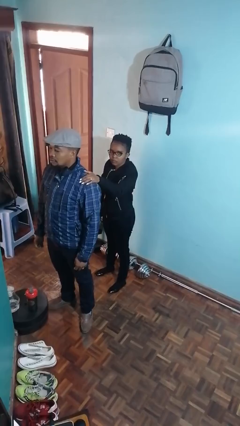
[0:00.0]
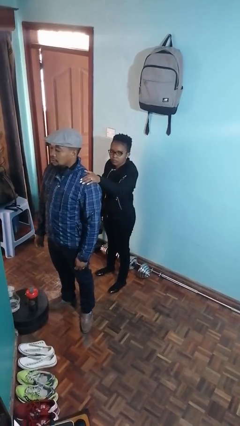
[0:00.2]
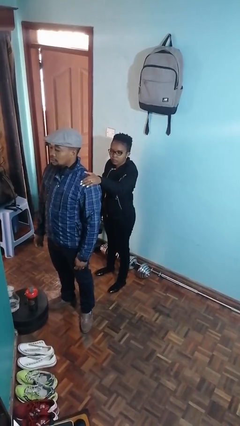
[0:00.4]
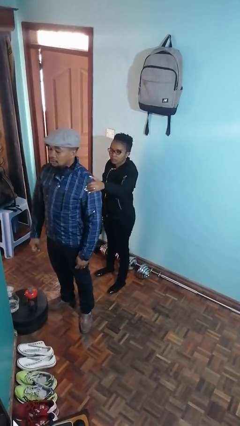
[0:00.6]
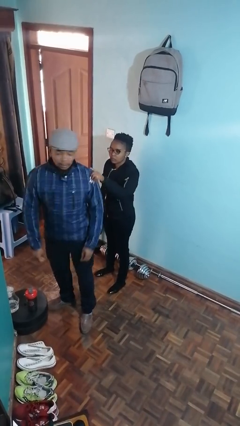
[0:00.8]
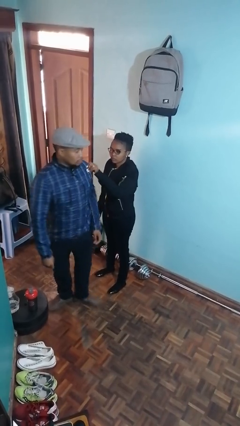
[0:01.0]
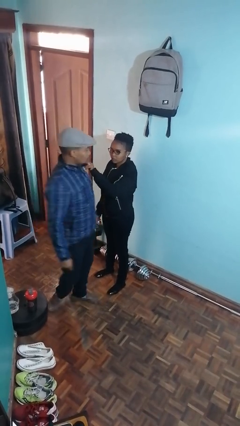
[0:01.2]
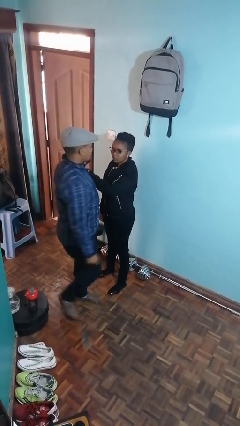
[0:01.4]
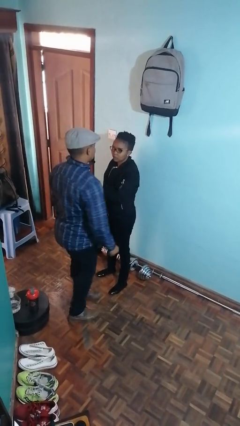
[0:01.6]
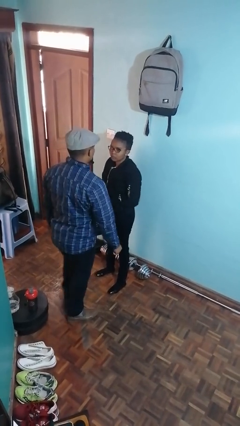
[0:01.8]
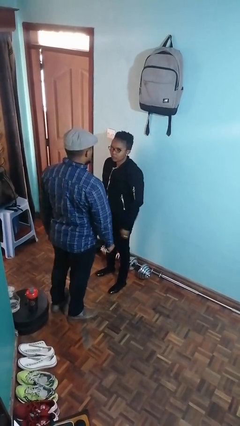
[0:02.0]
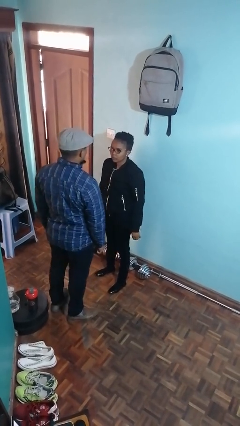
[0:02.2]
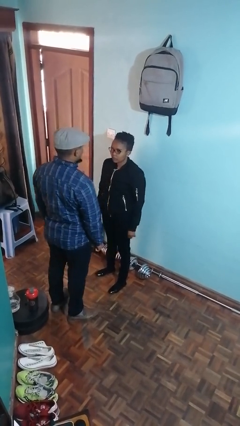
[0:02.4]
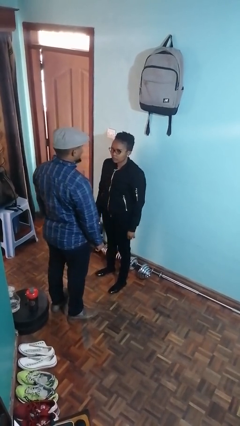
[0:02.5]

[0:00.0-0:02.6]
person spins person around

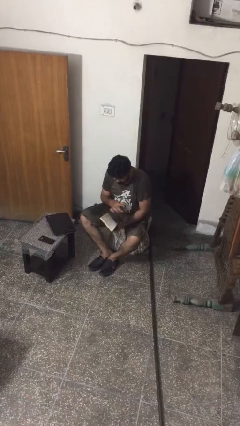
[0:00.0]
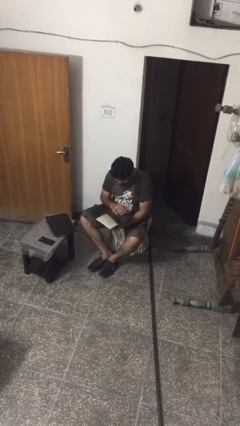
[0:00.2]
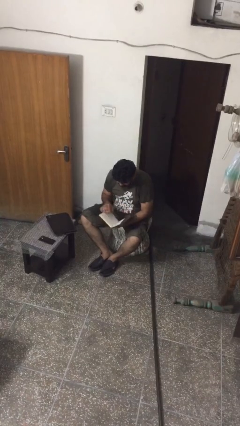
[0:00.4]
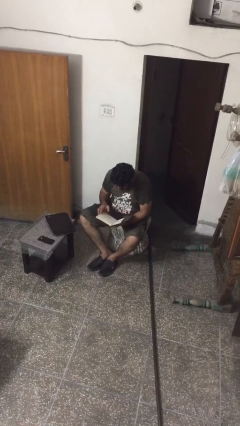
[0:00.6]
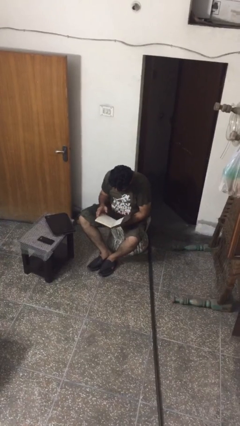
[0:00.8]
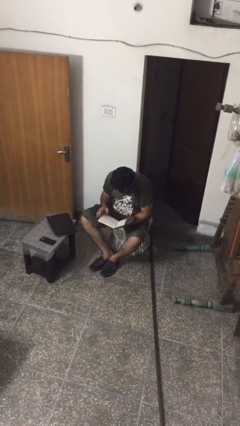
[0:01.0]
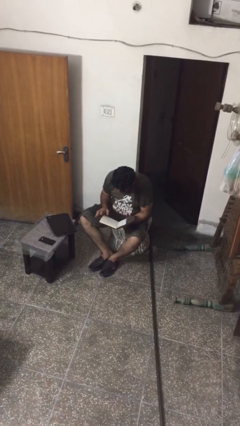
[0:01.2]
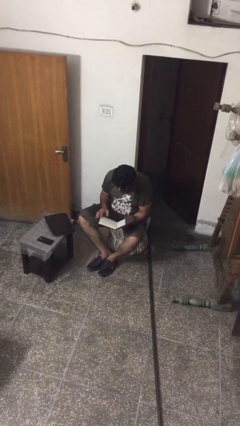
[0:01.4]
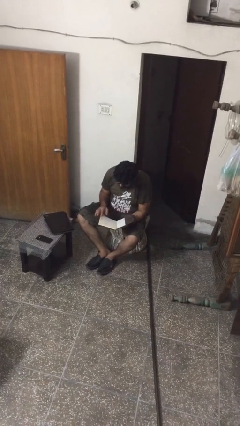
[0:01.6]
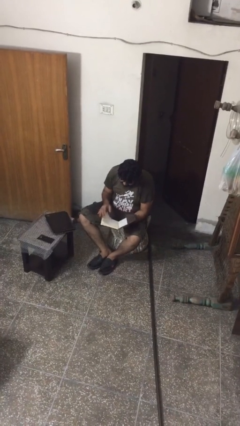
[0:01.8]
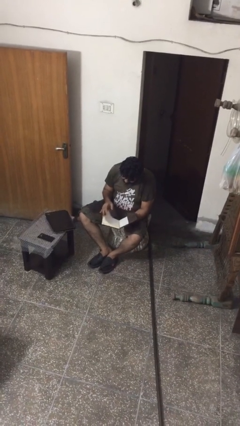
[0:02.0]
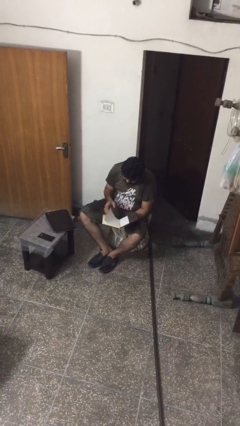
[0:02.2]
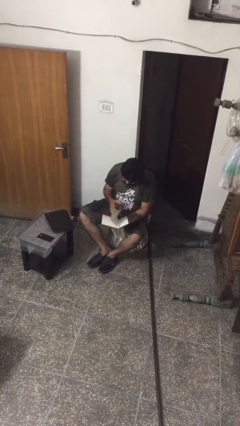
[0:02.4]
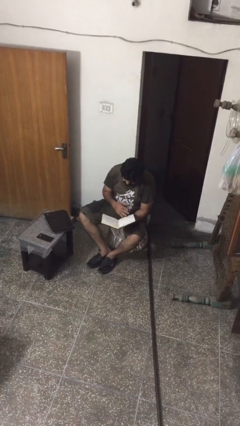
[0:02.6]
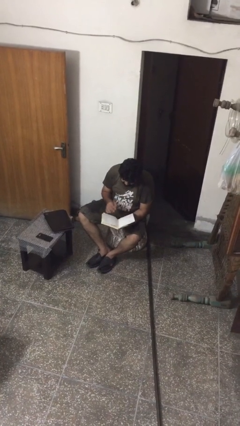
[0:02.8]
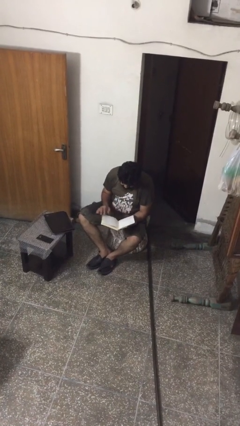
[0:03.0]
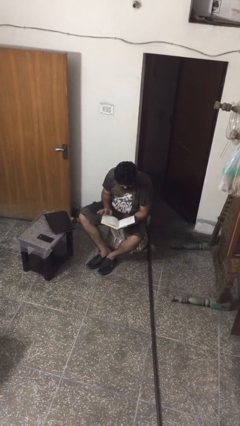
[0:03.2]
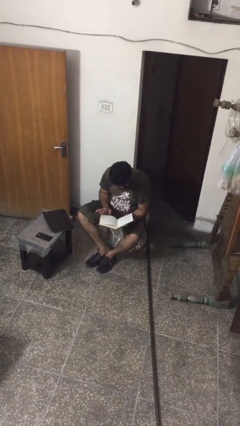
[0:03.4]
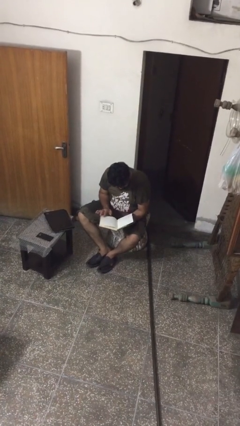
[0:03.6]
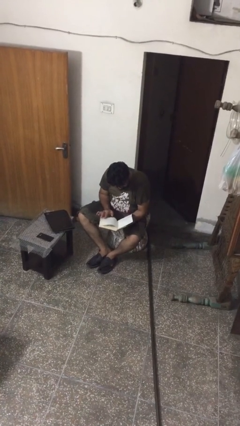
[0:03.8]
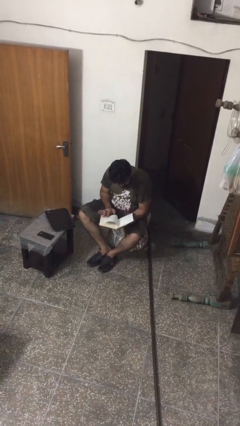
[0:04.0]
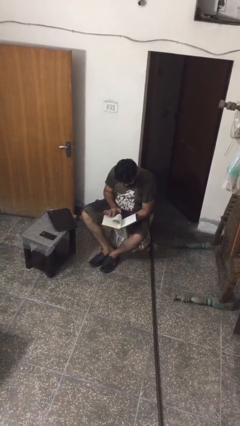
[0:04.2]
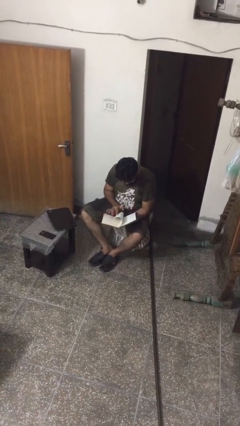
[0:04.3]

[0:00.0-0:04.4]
person reads document

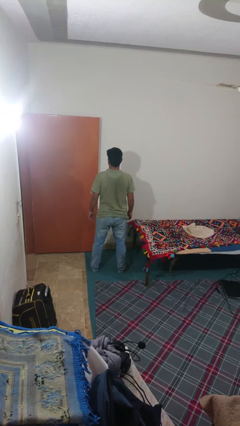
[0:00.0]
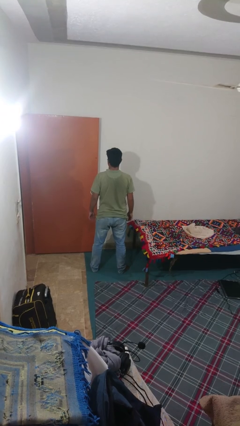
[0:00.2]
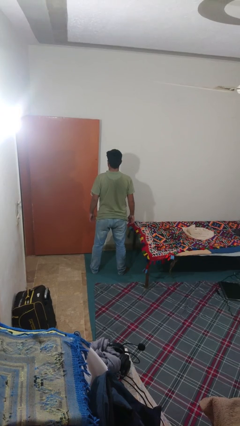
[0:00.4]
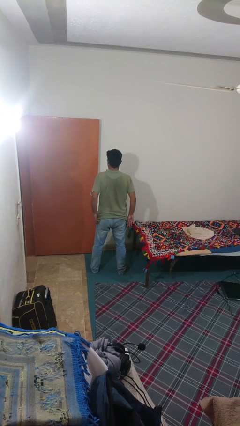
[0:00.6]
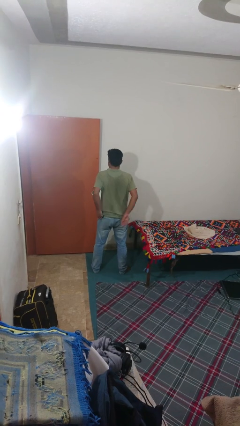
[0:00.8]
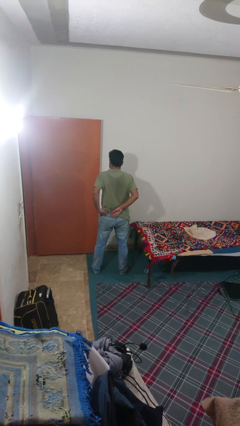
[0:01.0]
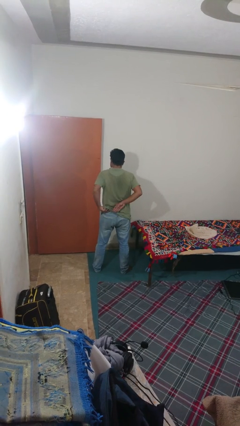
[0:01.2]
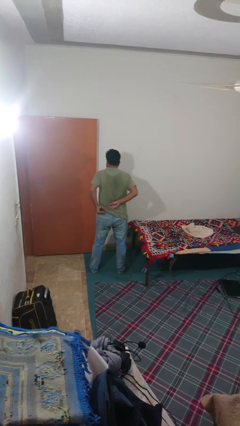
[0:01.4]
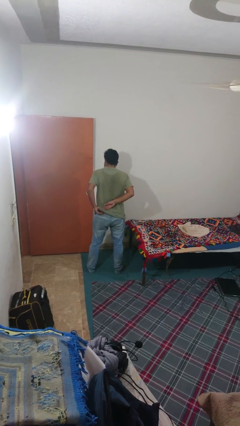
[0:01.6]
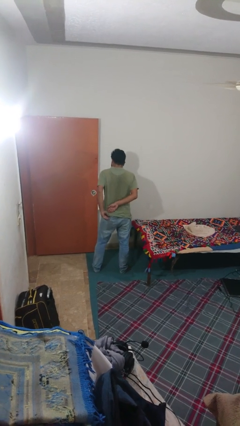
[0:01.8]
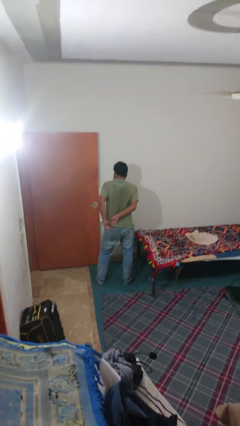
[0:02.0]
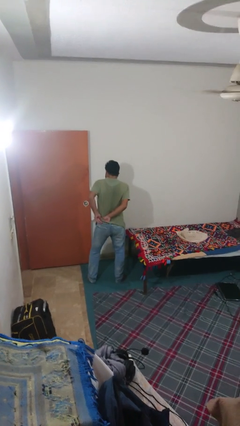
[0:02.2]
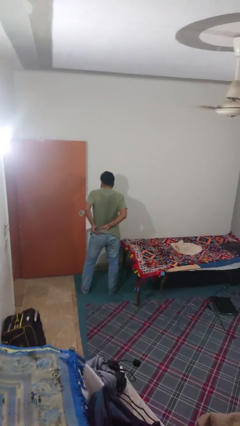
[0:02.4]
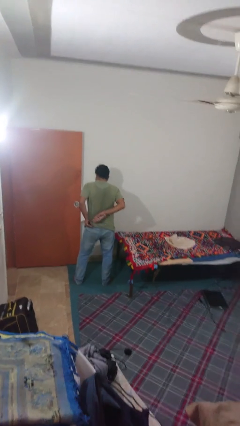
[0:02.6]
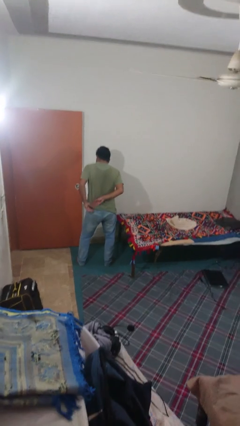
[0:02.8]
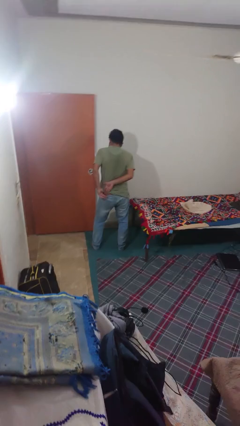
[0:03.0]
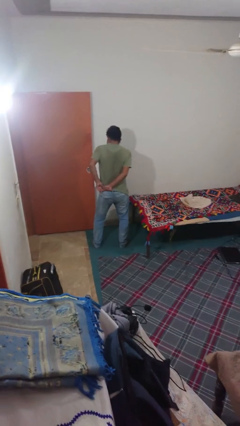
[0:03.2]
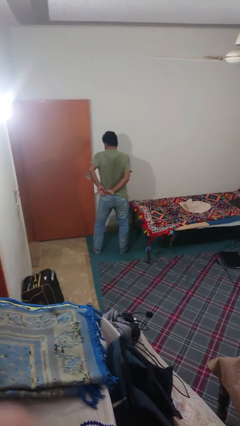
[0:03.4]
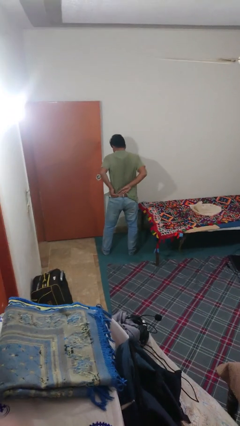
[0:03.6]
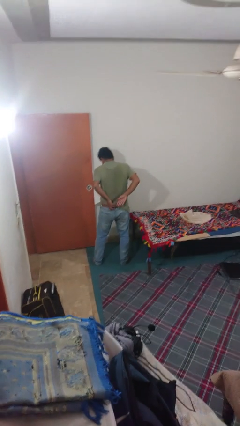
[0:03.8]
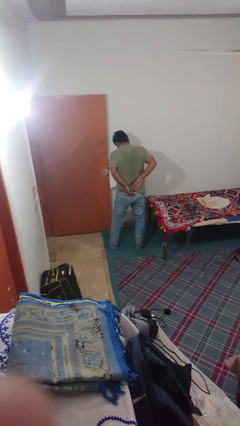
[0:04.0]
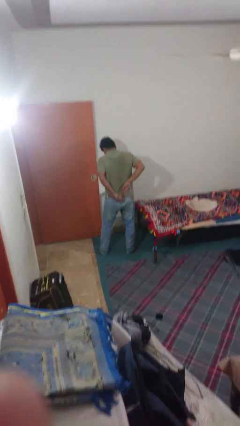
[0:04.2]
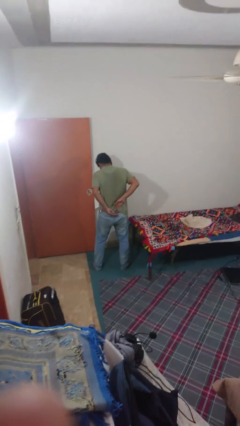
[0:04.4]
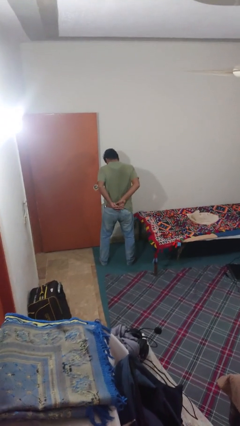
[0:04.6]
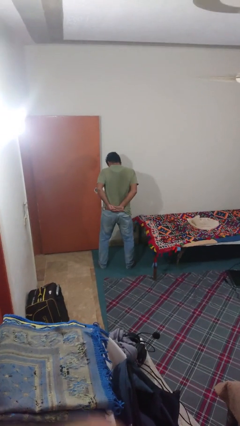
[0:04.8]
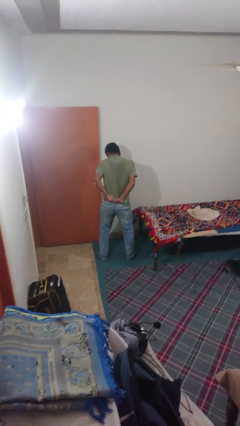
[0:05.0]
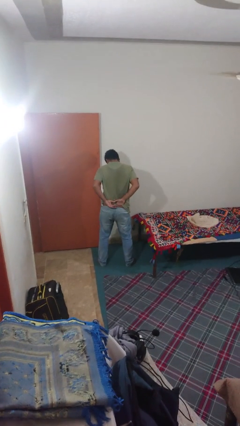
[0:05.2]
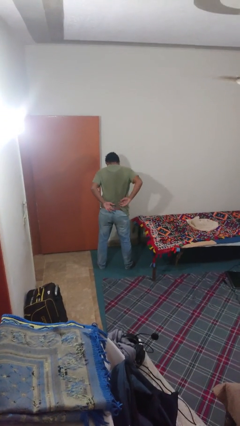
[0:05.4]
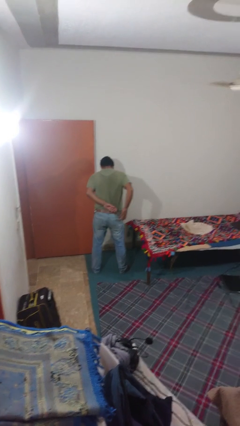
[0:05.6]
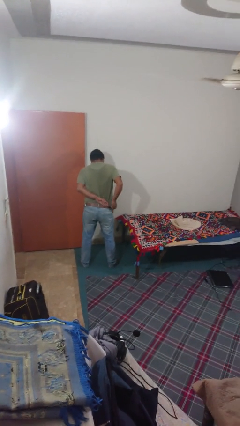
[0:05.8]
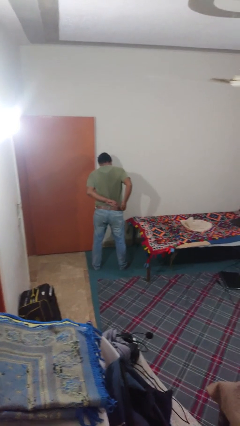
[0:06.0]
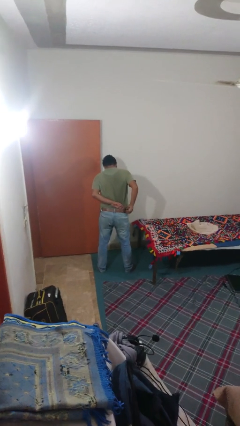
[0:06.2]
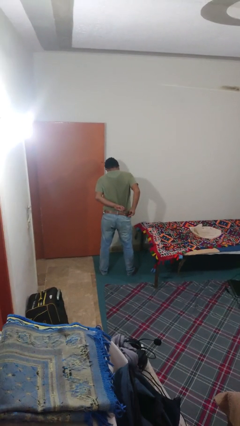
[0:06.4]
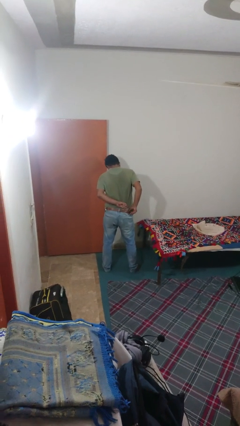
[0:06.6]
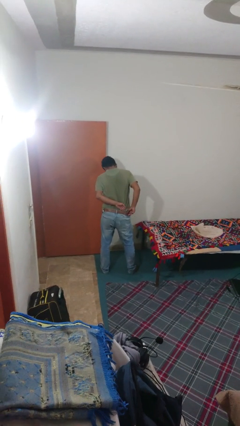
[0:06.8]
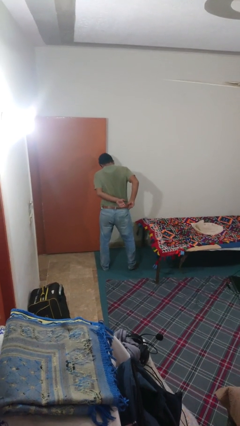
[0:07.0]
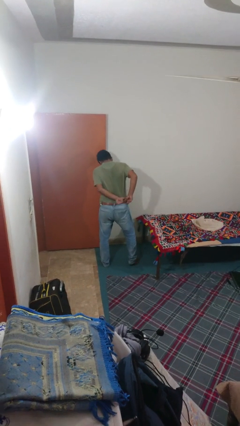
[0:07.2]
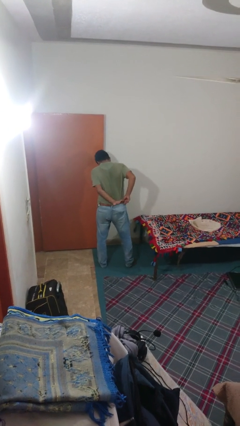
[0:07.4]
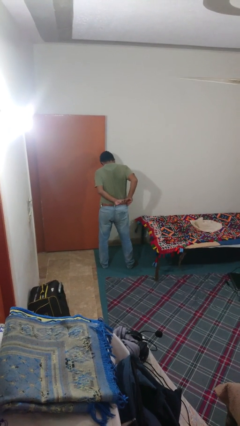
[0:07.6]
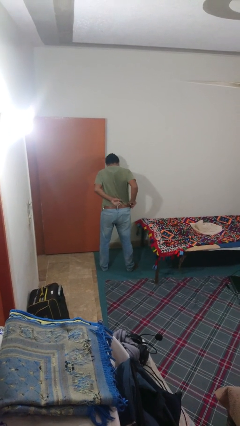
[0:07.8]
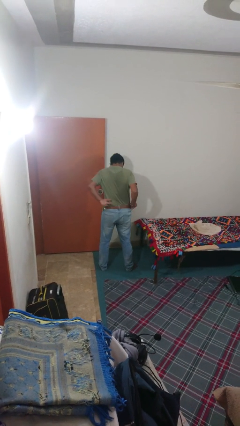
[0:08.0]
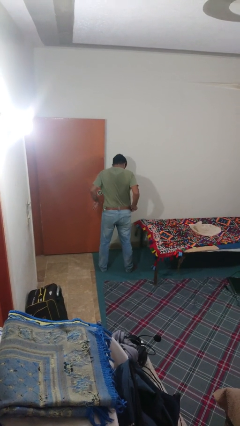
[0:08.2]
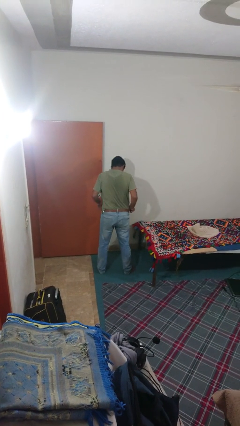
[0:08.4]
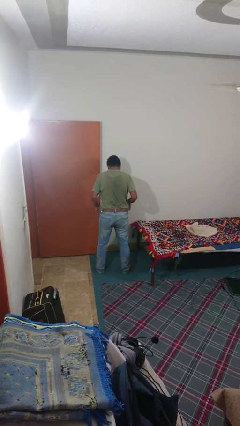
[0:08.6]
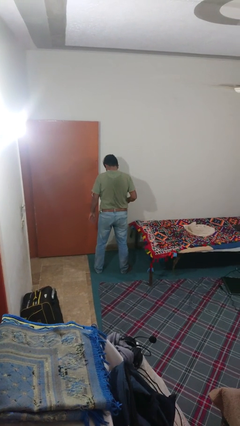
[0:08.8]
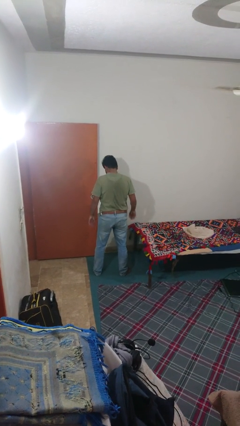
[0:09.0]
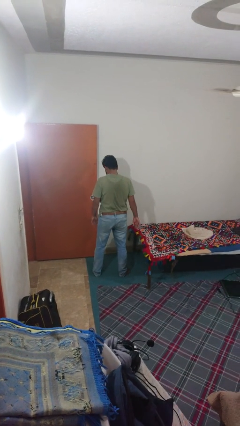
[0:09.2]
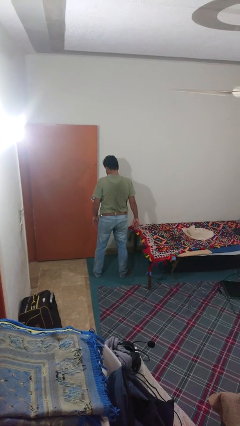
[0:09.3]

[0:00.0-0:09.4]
person tucks in shirt

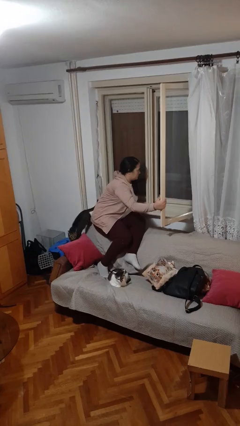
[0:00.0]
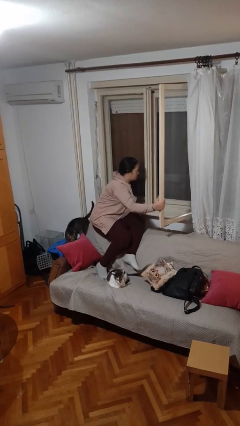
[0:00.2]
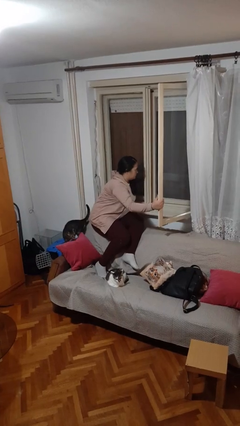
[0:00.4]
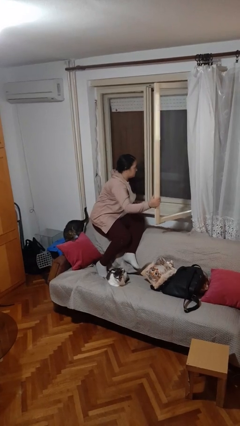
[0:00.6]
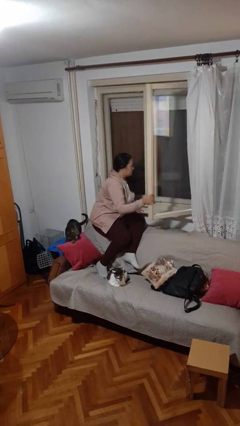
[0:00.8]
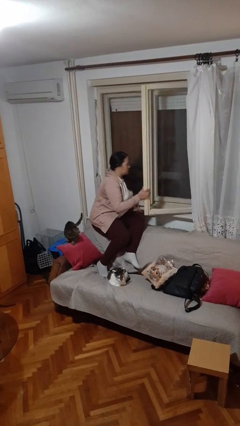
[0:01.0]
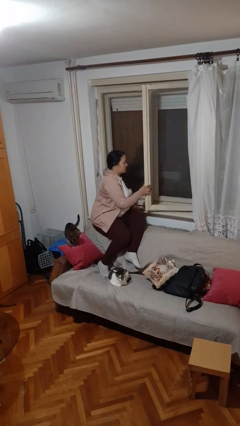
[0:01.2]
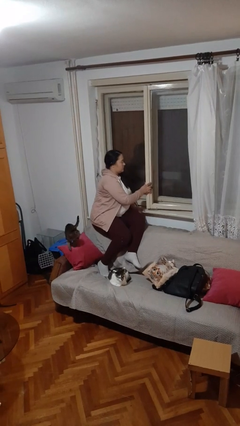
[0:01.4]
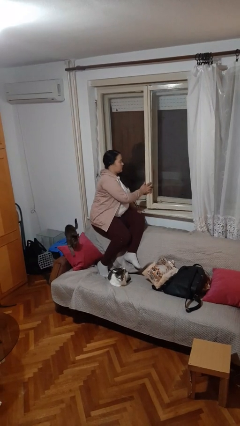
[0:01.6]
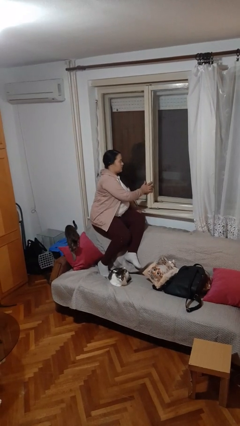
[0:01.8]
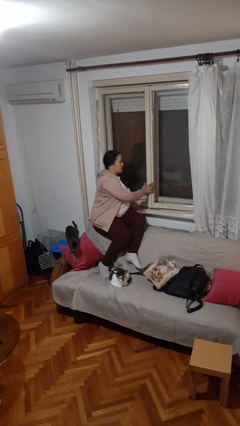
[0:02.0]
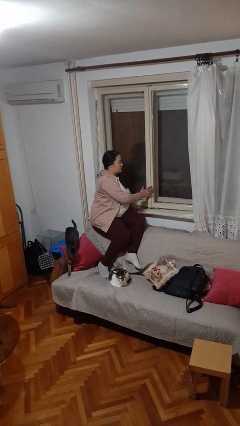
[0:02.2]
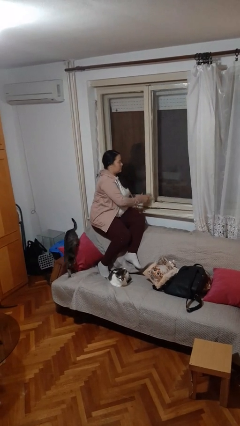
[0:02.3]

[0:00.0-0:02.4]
person closes home window
